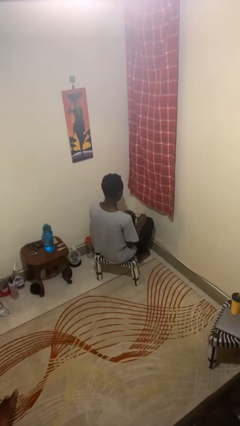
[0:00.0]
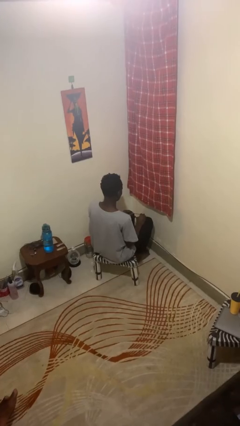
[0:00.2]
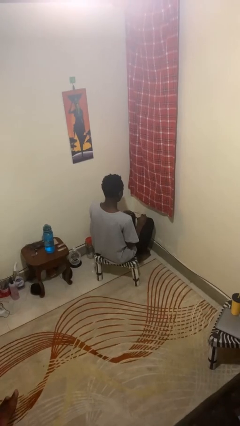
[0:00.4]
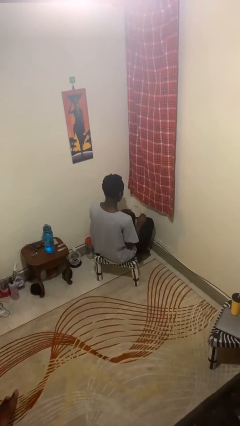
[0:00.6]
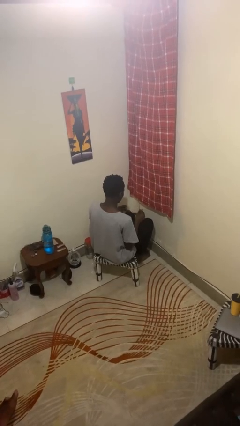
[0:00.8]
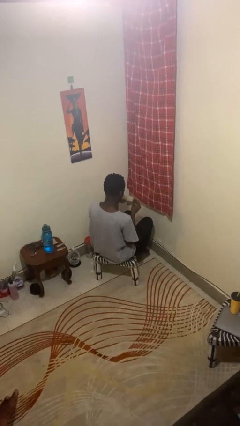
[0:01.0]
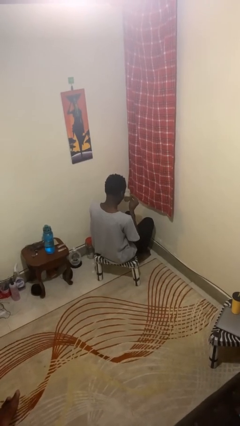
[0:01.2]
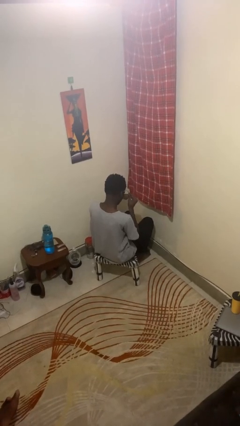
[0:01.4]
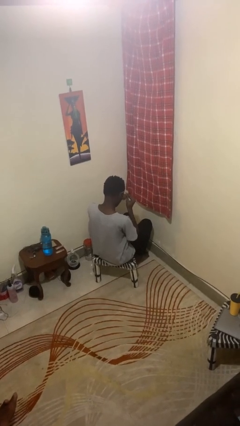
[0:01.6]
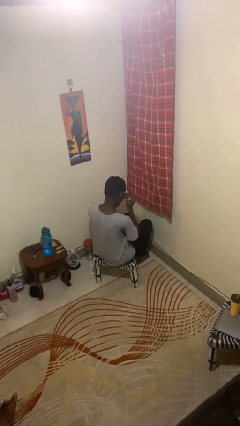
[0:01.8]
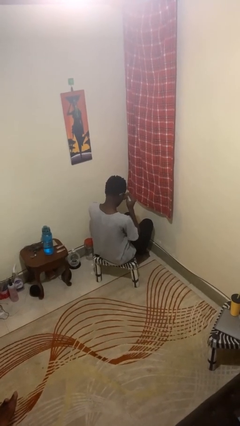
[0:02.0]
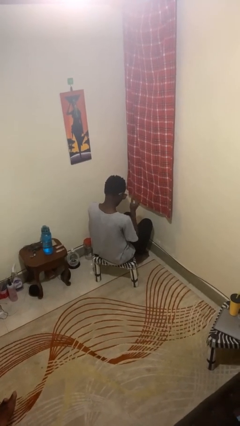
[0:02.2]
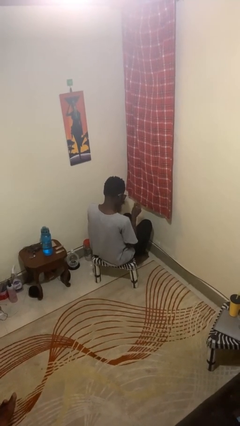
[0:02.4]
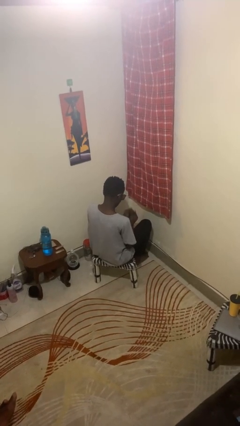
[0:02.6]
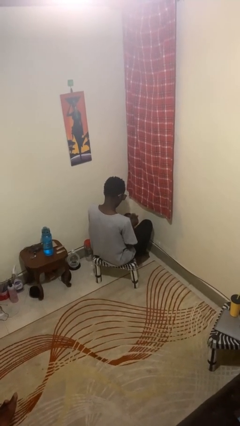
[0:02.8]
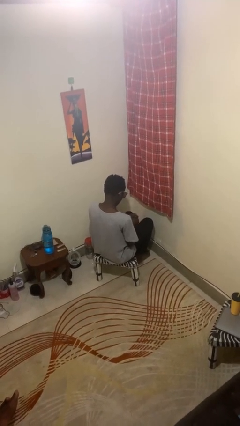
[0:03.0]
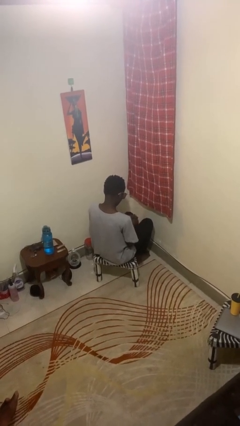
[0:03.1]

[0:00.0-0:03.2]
person puts on glasses

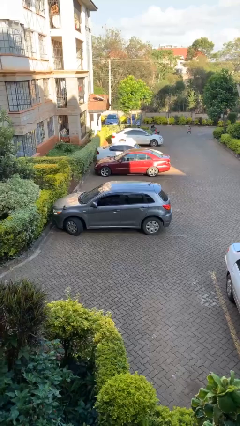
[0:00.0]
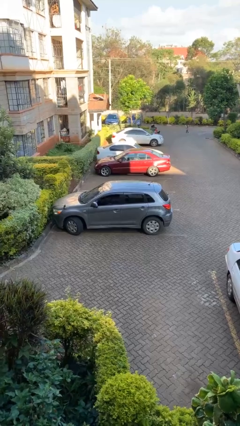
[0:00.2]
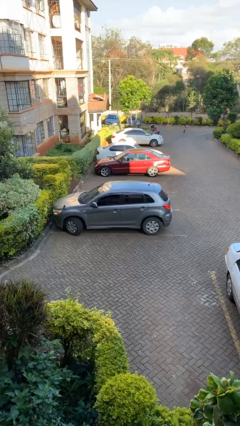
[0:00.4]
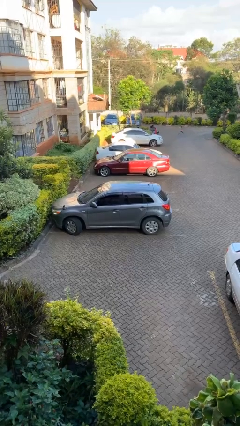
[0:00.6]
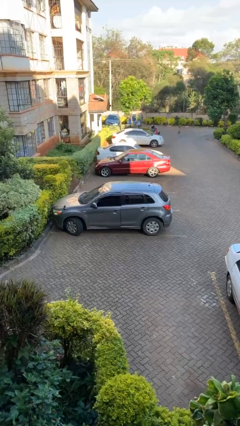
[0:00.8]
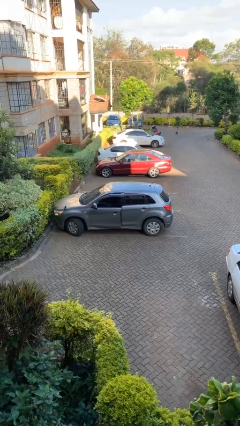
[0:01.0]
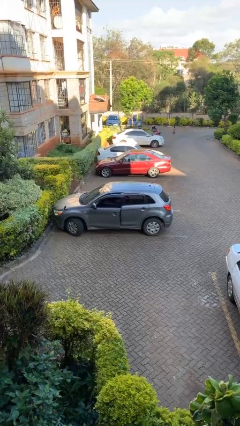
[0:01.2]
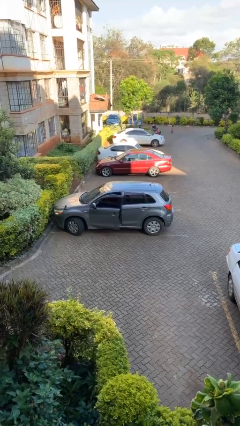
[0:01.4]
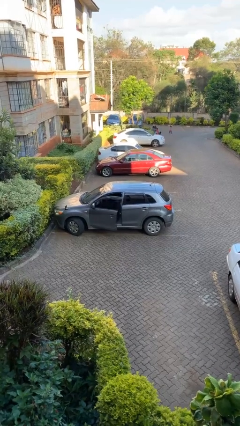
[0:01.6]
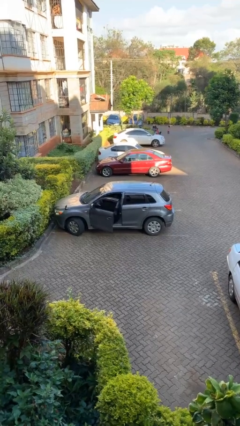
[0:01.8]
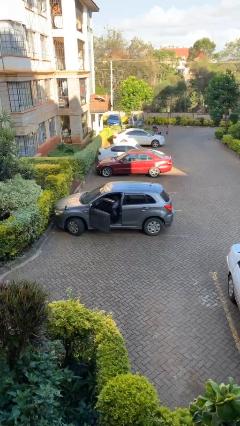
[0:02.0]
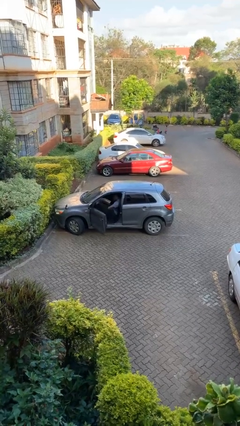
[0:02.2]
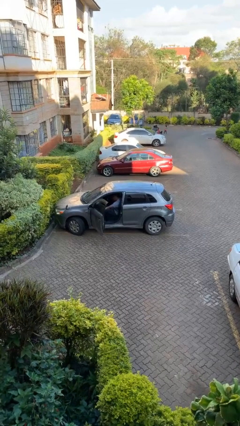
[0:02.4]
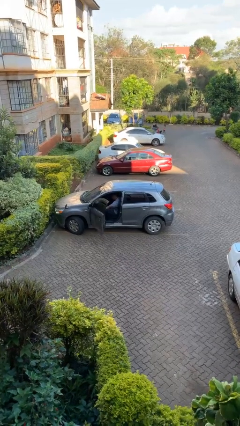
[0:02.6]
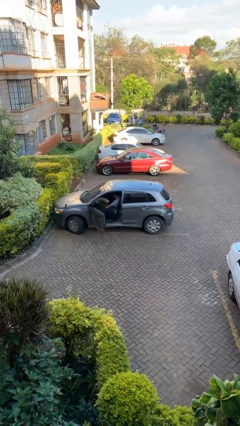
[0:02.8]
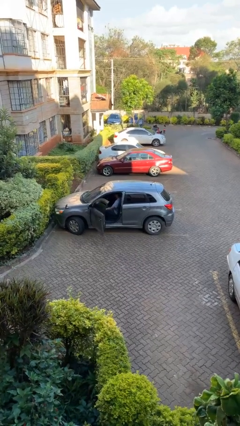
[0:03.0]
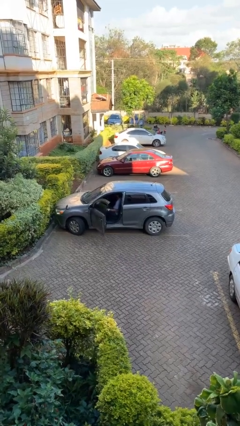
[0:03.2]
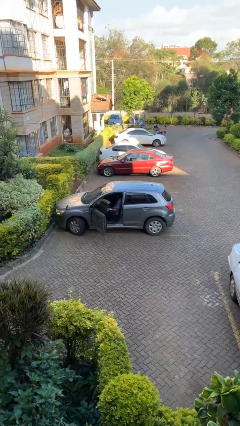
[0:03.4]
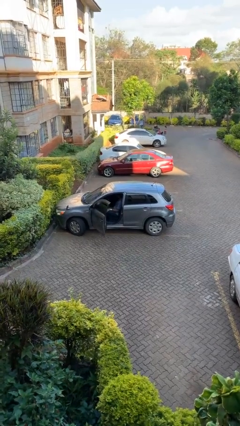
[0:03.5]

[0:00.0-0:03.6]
person opens car door

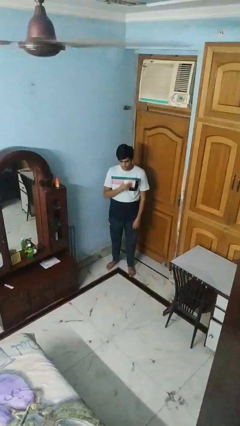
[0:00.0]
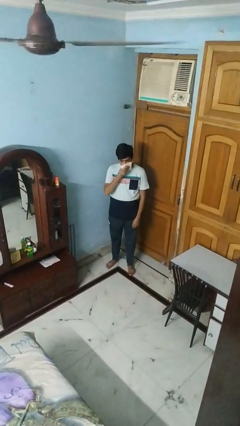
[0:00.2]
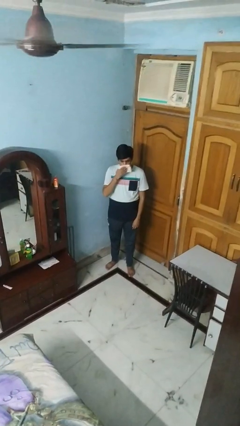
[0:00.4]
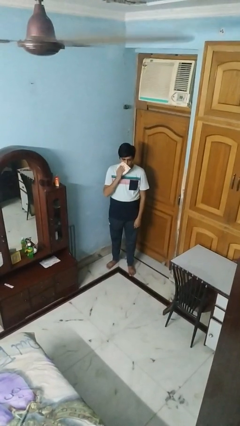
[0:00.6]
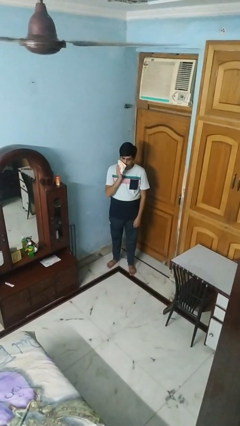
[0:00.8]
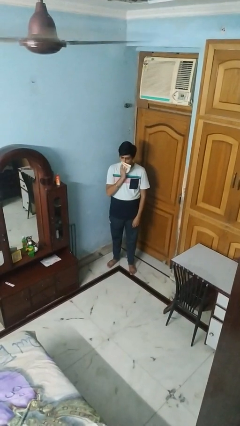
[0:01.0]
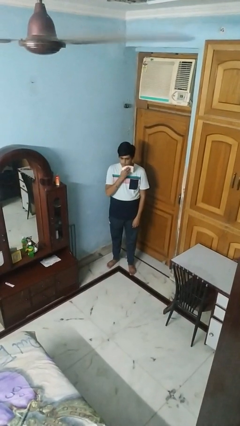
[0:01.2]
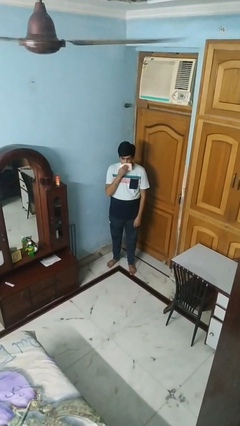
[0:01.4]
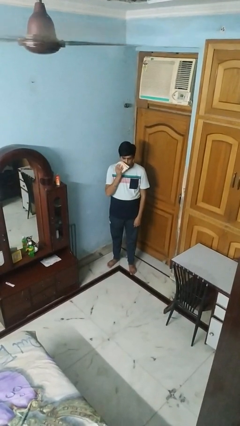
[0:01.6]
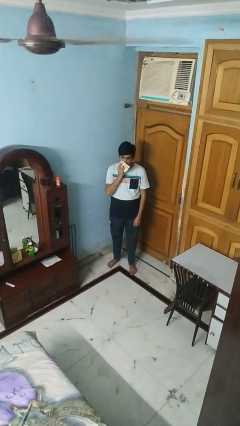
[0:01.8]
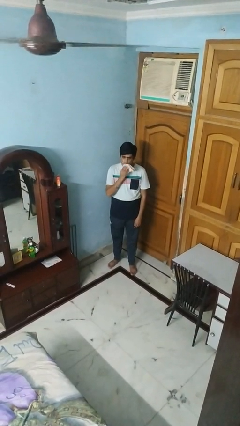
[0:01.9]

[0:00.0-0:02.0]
person wipes mouth with napkin

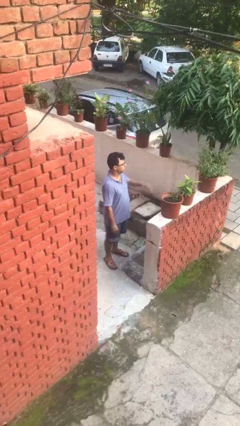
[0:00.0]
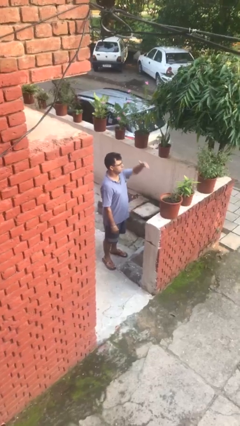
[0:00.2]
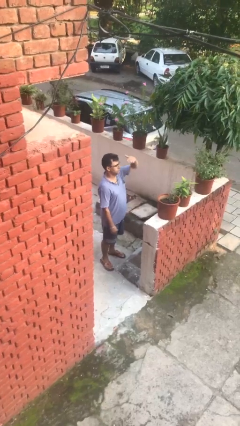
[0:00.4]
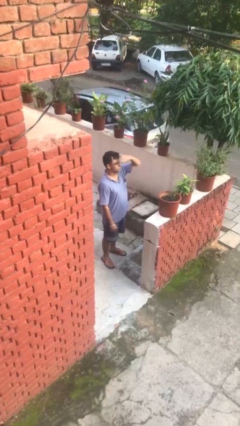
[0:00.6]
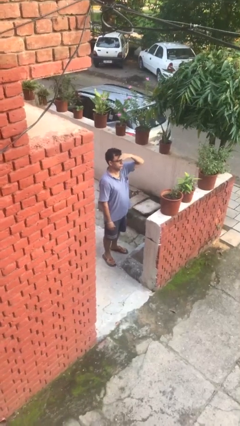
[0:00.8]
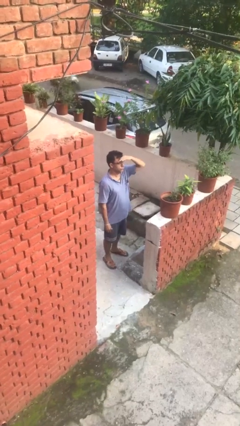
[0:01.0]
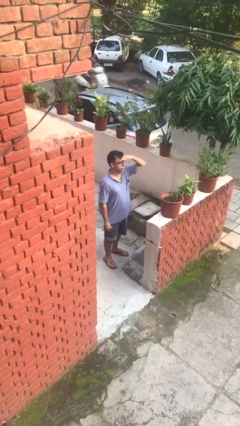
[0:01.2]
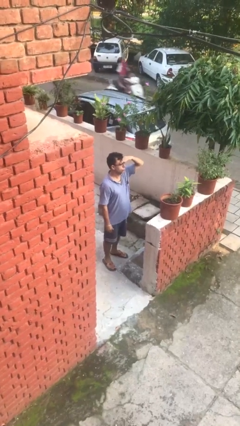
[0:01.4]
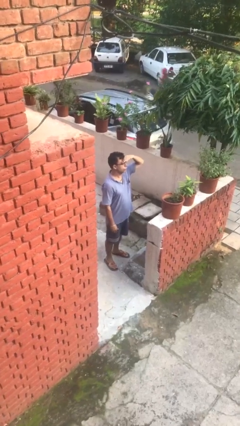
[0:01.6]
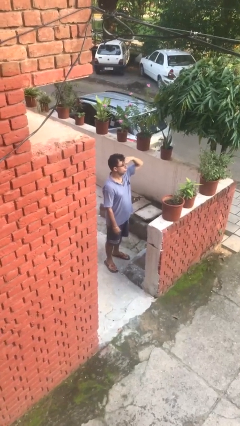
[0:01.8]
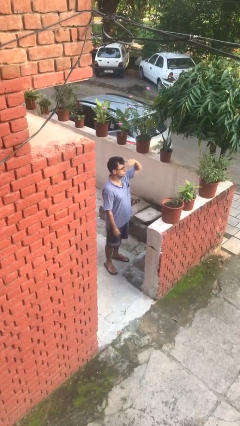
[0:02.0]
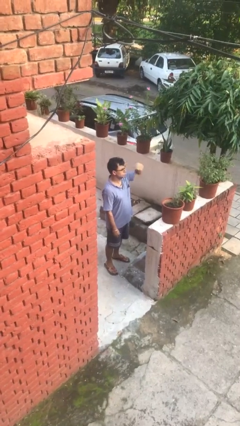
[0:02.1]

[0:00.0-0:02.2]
person shades eyes

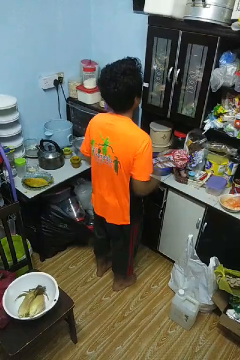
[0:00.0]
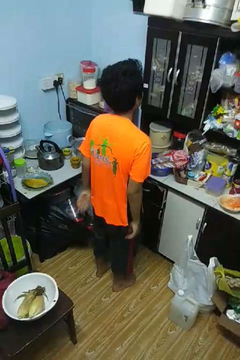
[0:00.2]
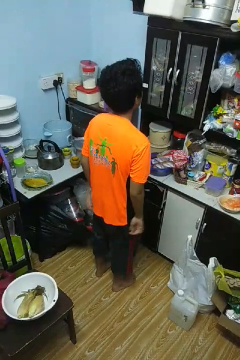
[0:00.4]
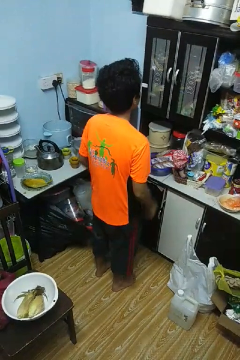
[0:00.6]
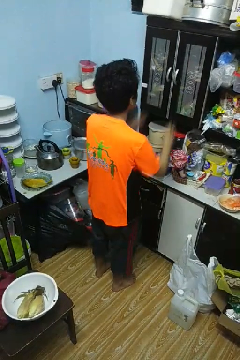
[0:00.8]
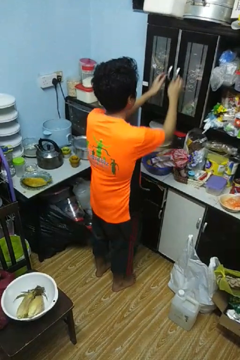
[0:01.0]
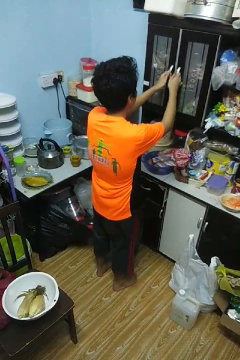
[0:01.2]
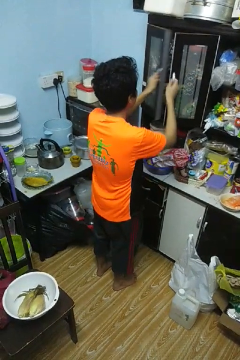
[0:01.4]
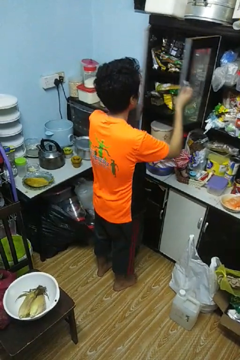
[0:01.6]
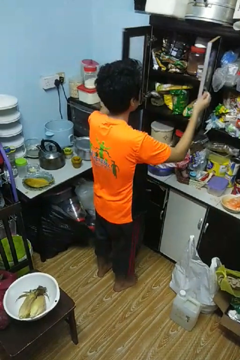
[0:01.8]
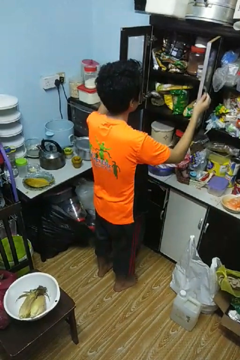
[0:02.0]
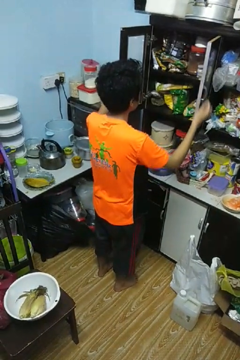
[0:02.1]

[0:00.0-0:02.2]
person opens cabinet

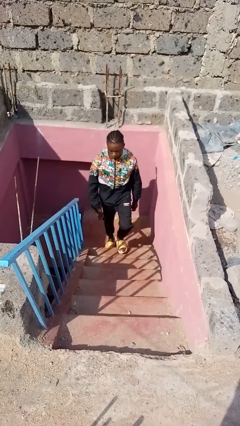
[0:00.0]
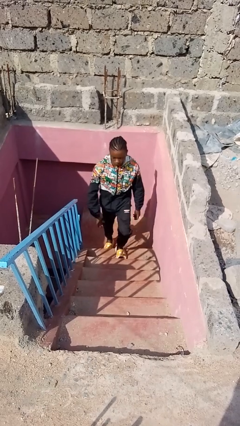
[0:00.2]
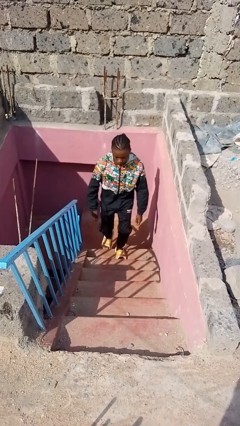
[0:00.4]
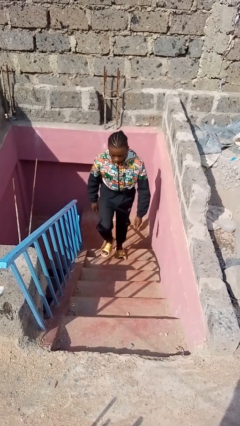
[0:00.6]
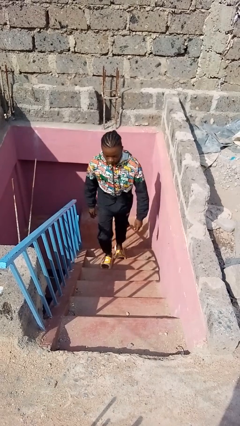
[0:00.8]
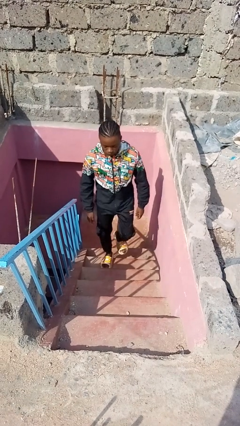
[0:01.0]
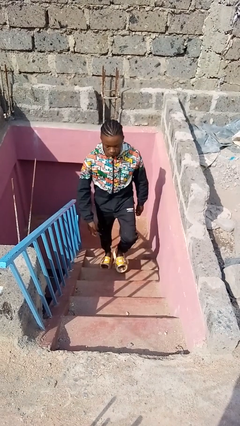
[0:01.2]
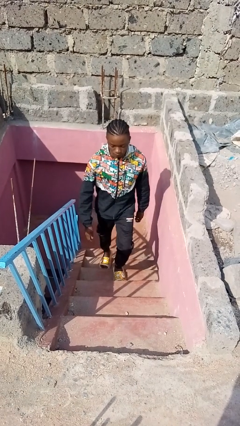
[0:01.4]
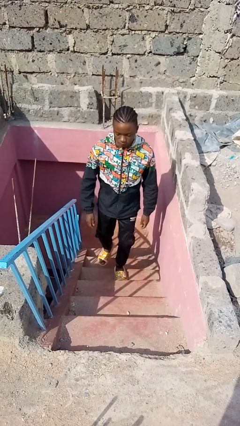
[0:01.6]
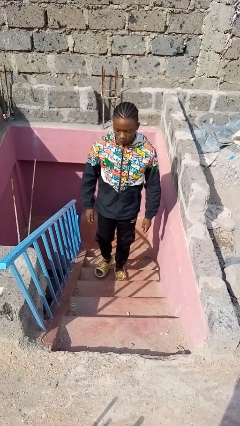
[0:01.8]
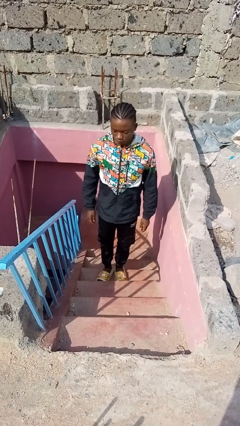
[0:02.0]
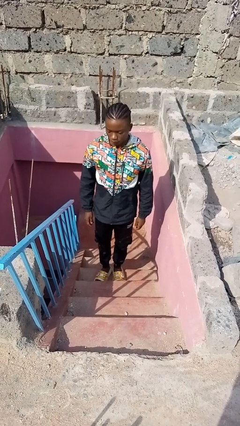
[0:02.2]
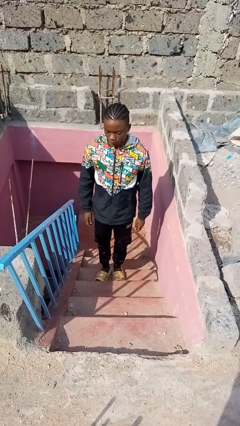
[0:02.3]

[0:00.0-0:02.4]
person climbs up stairs

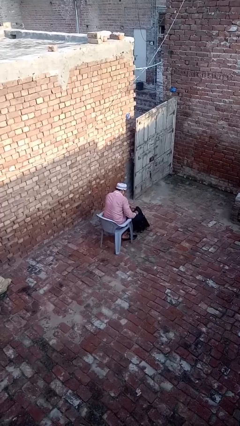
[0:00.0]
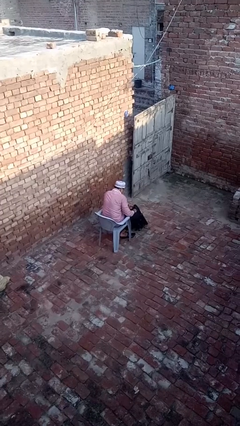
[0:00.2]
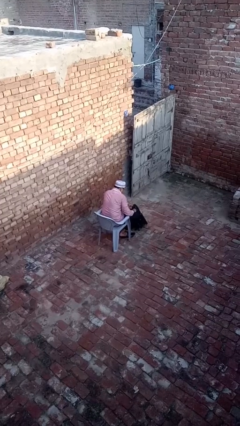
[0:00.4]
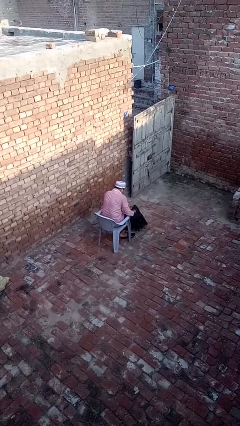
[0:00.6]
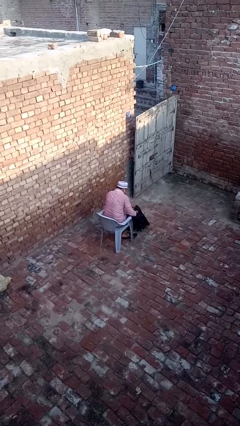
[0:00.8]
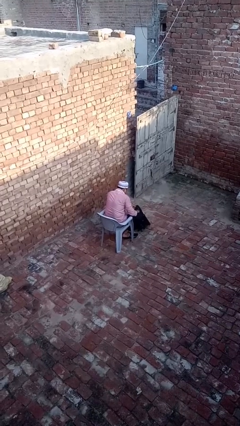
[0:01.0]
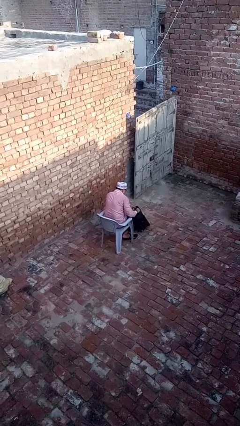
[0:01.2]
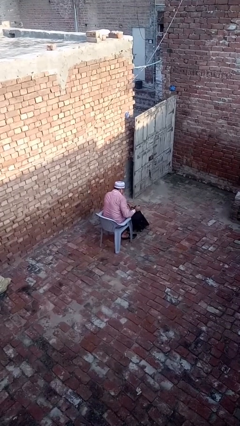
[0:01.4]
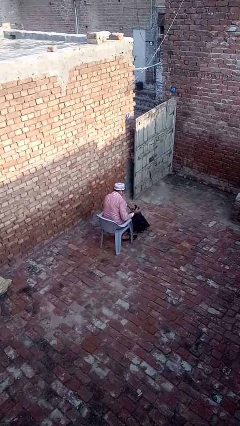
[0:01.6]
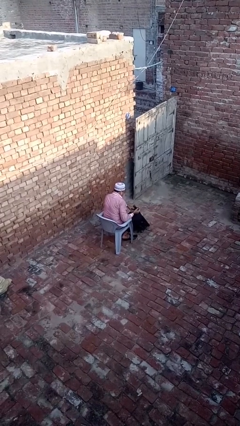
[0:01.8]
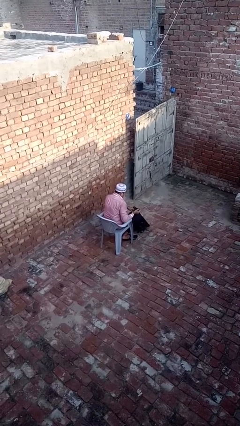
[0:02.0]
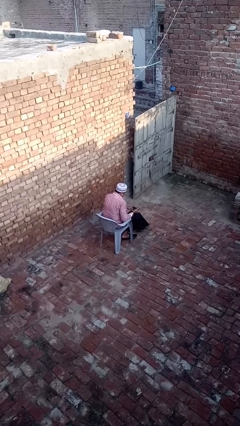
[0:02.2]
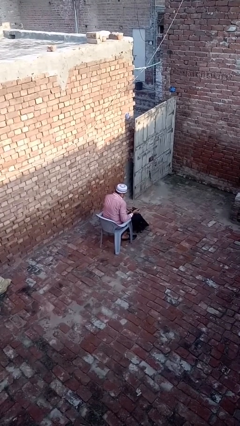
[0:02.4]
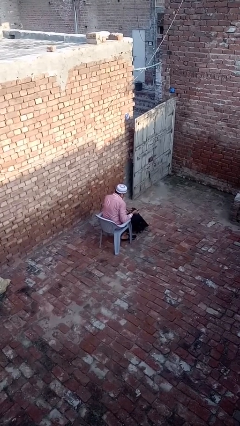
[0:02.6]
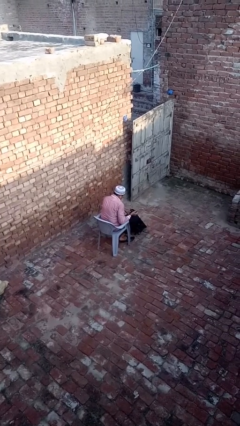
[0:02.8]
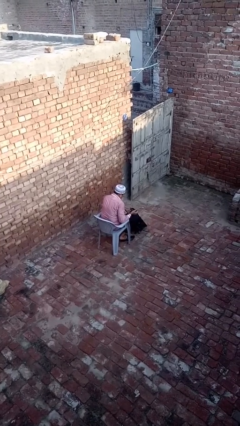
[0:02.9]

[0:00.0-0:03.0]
person takes object from backpack
